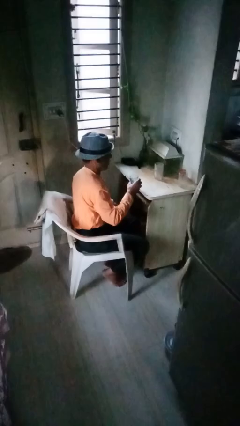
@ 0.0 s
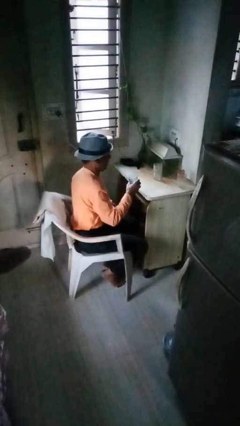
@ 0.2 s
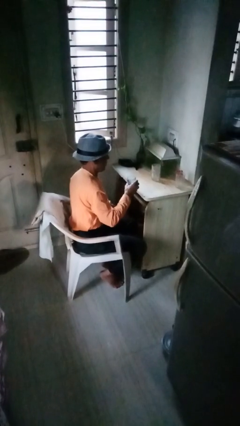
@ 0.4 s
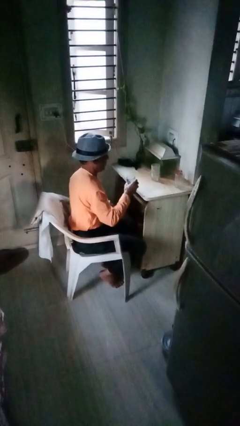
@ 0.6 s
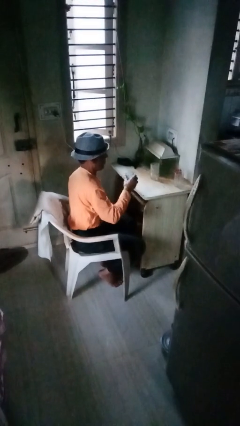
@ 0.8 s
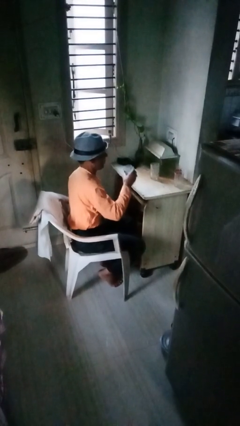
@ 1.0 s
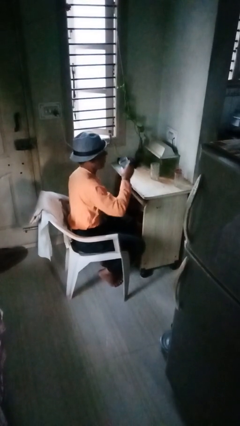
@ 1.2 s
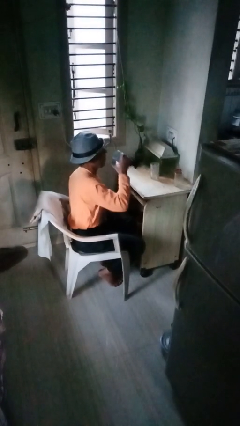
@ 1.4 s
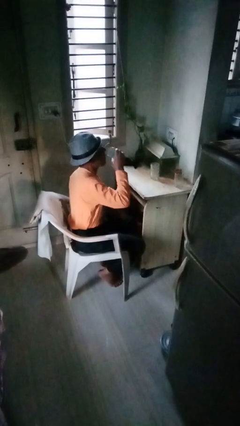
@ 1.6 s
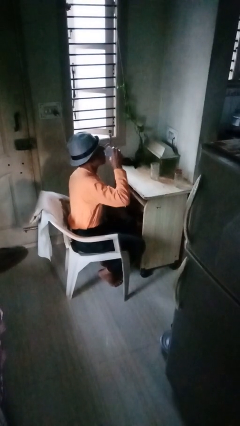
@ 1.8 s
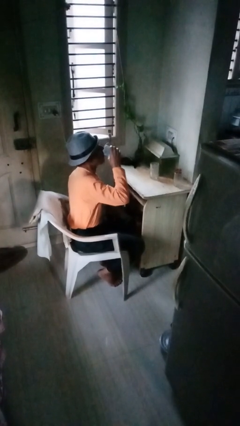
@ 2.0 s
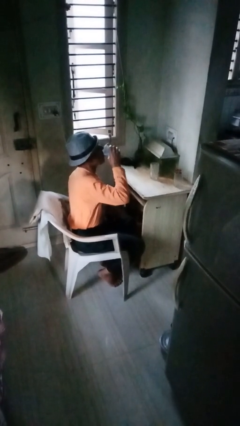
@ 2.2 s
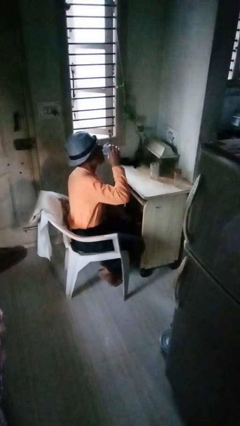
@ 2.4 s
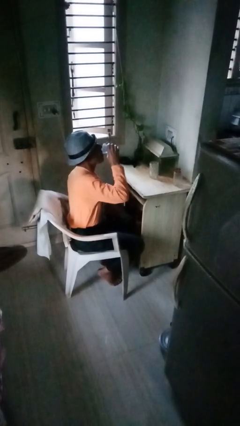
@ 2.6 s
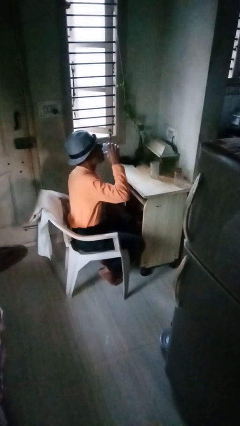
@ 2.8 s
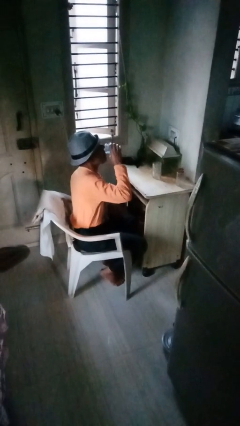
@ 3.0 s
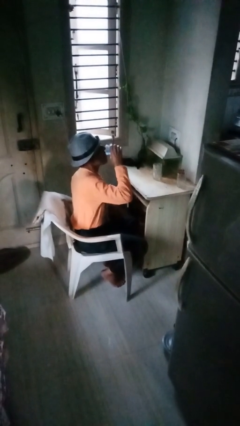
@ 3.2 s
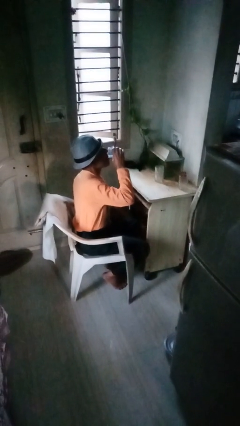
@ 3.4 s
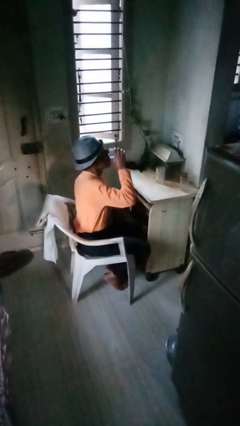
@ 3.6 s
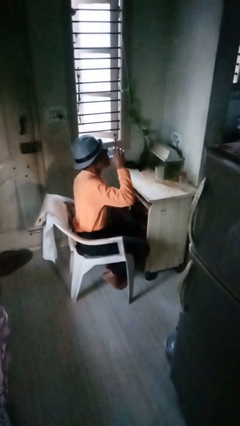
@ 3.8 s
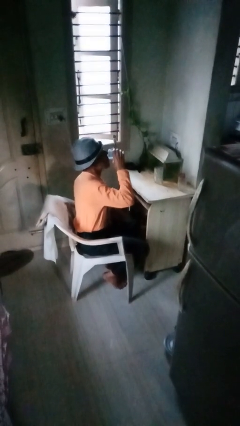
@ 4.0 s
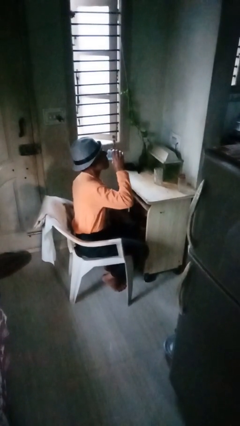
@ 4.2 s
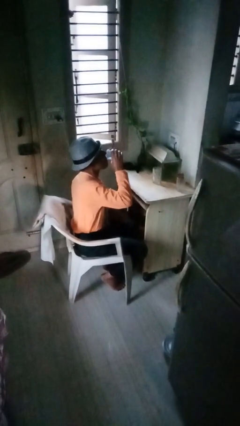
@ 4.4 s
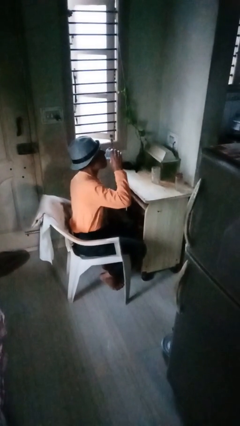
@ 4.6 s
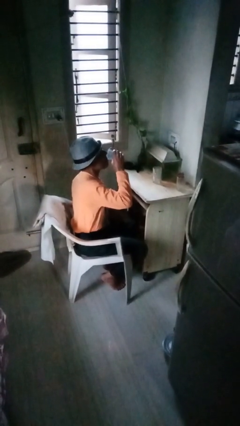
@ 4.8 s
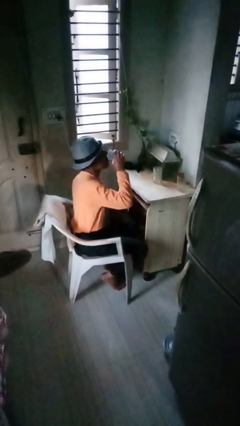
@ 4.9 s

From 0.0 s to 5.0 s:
person drinks from shotglass

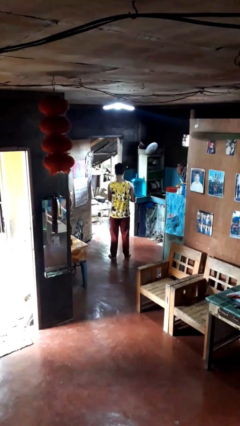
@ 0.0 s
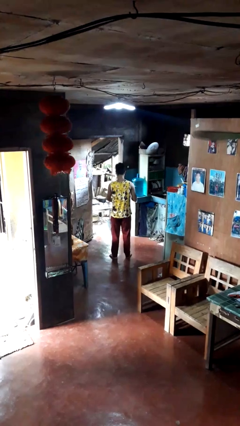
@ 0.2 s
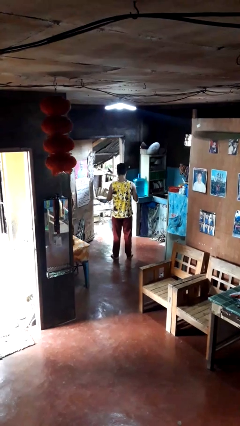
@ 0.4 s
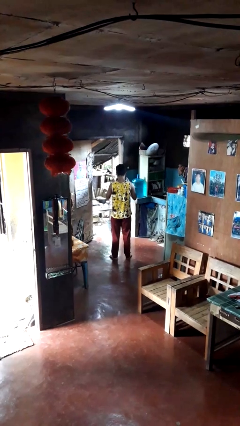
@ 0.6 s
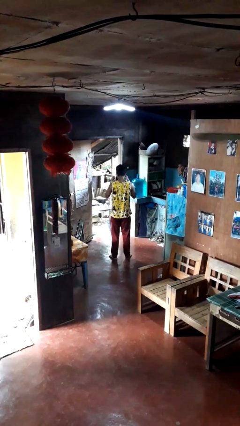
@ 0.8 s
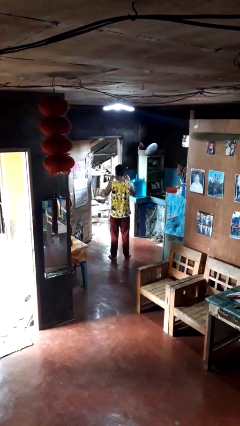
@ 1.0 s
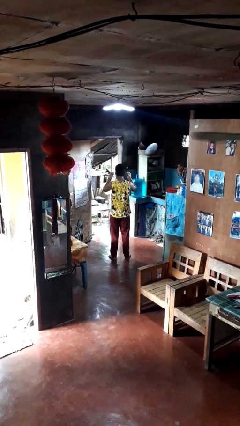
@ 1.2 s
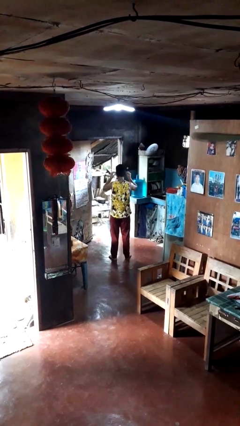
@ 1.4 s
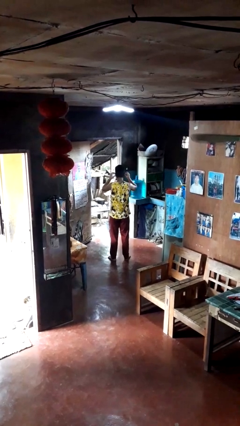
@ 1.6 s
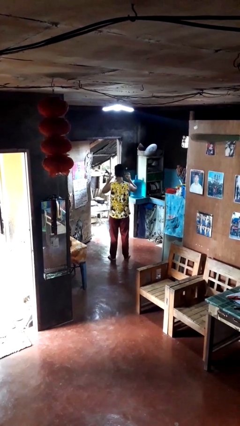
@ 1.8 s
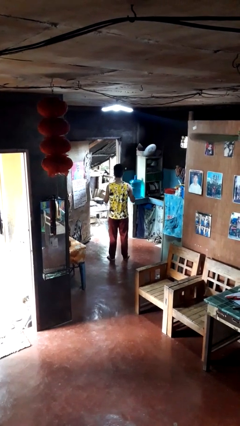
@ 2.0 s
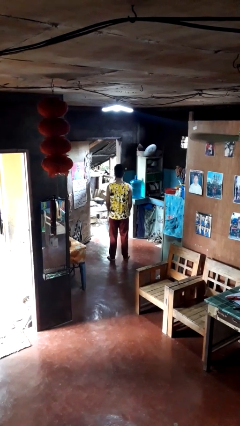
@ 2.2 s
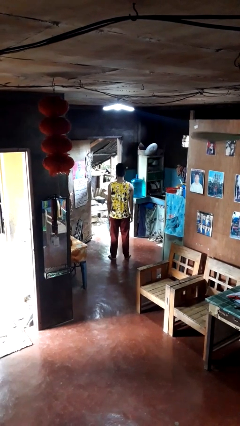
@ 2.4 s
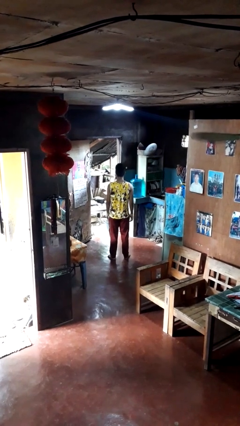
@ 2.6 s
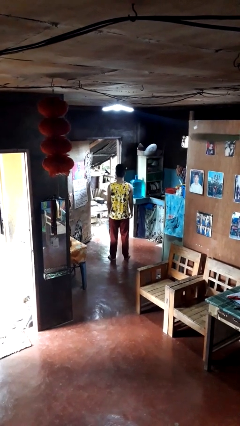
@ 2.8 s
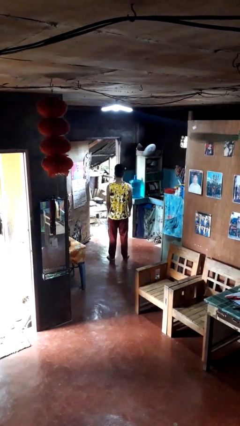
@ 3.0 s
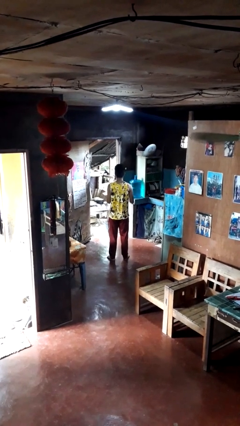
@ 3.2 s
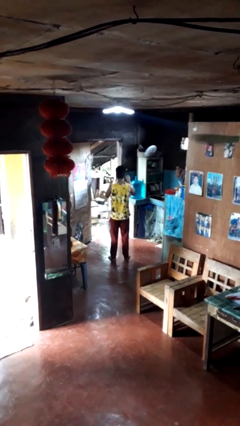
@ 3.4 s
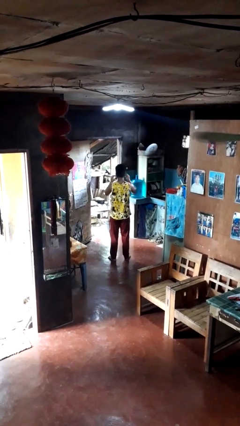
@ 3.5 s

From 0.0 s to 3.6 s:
person puts on facemask

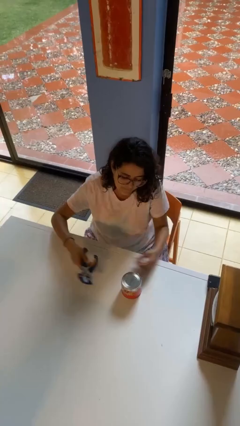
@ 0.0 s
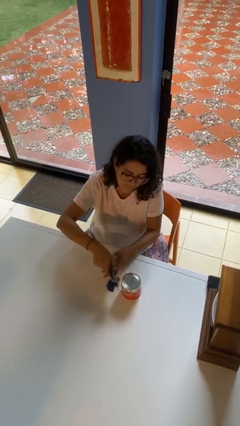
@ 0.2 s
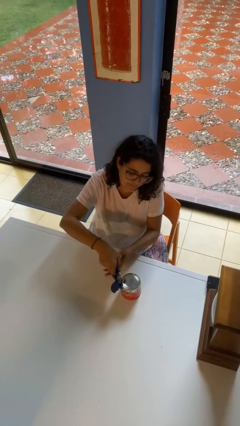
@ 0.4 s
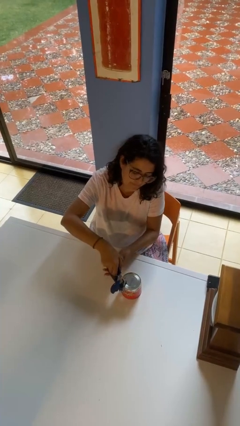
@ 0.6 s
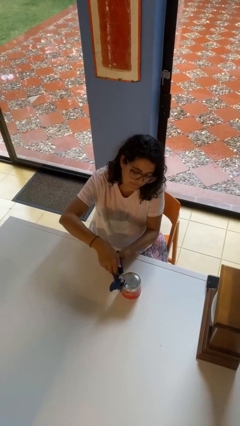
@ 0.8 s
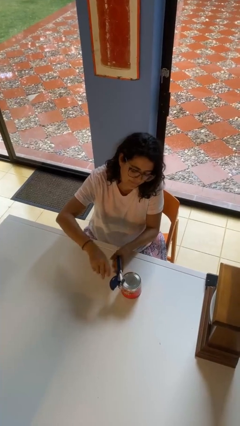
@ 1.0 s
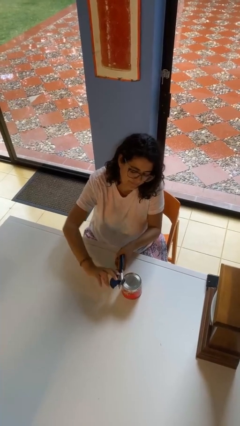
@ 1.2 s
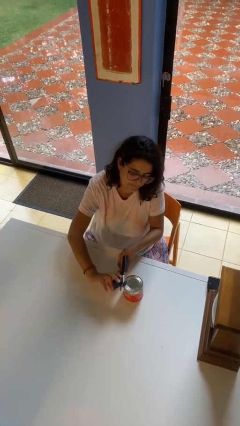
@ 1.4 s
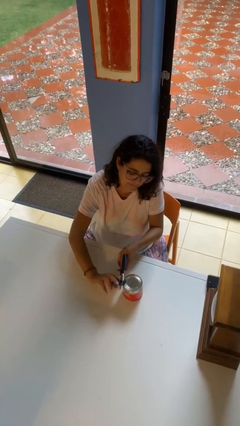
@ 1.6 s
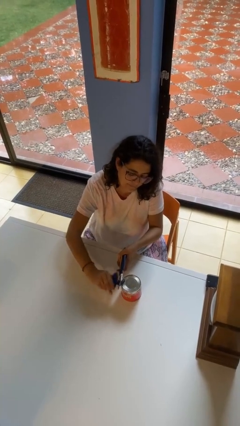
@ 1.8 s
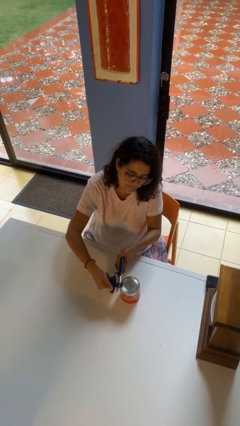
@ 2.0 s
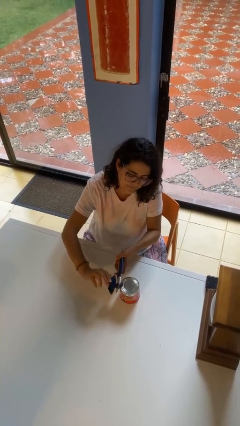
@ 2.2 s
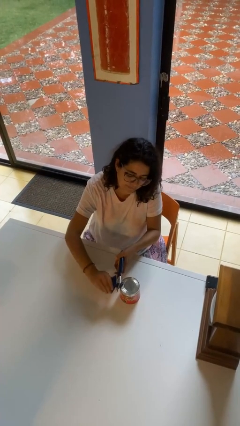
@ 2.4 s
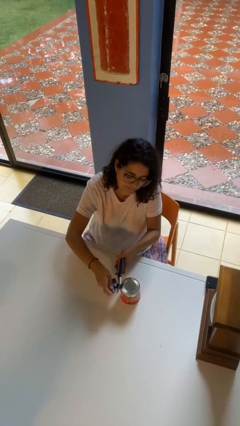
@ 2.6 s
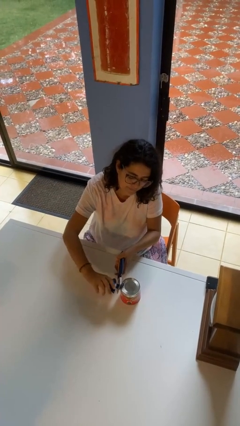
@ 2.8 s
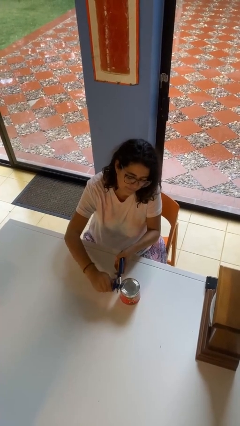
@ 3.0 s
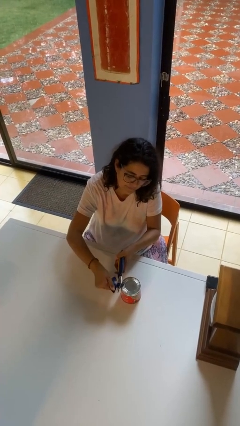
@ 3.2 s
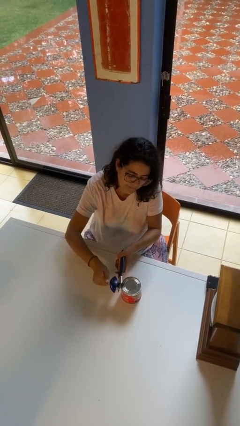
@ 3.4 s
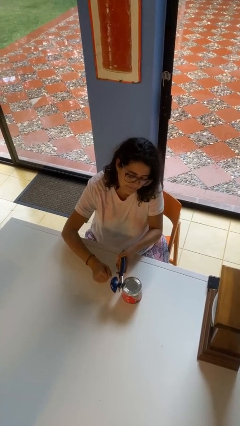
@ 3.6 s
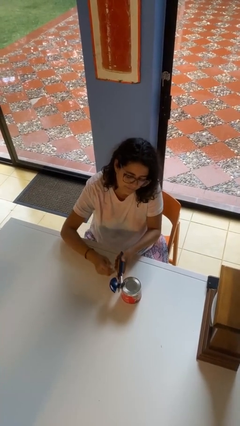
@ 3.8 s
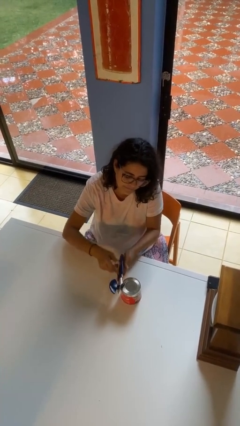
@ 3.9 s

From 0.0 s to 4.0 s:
person opens can with can opener

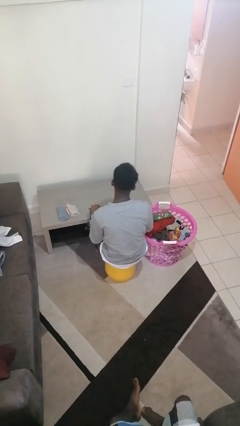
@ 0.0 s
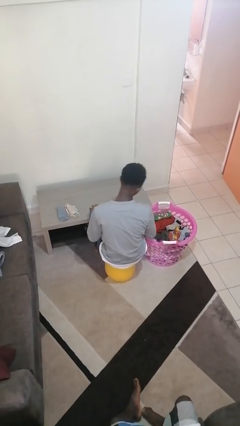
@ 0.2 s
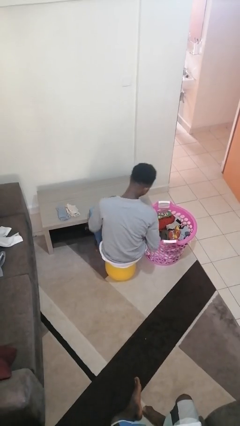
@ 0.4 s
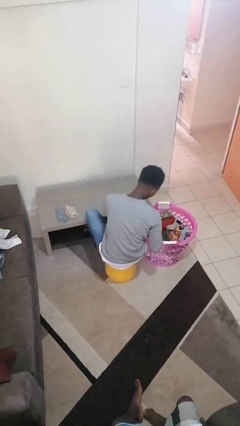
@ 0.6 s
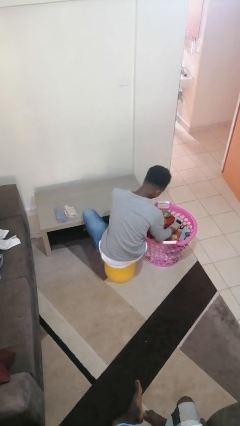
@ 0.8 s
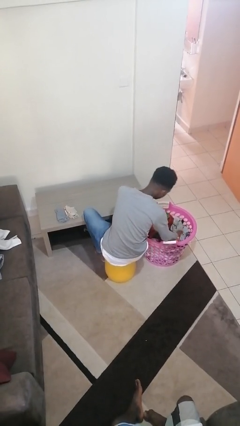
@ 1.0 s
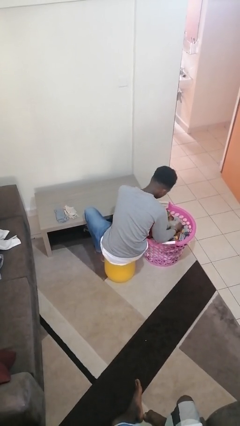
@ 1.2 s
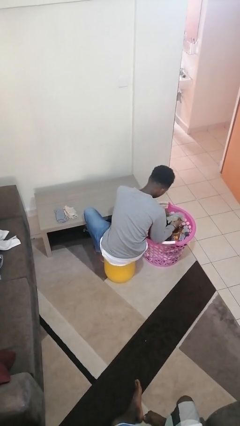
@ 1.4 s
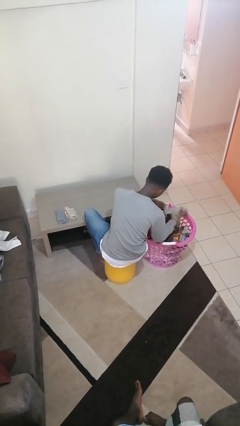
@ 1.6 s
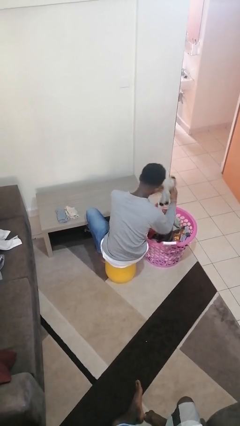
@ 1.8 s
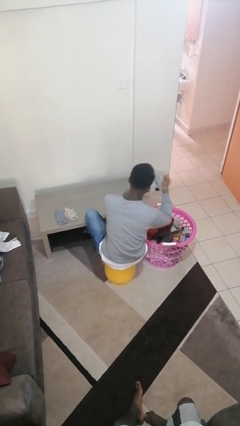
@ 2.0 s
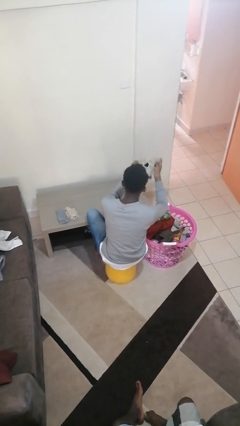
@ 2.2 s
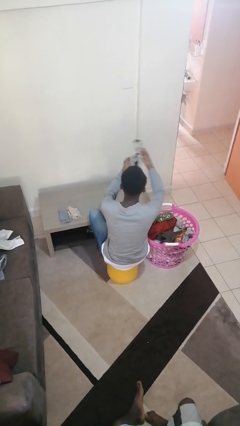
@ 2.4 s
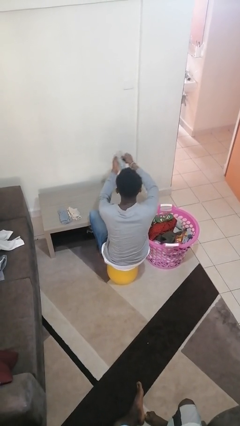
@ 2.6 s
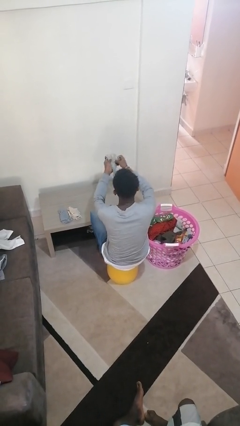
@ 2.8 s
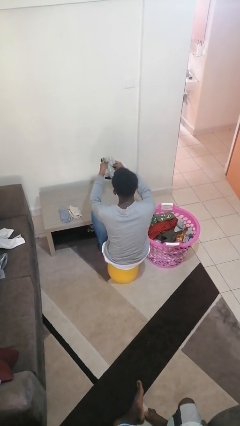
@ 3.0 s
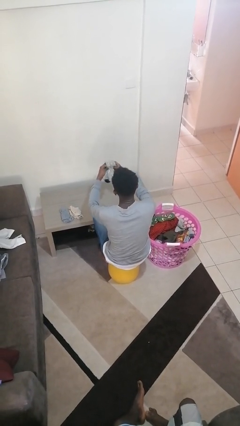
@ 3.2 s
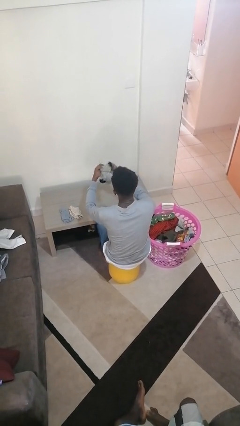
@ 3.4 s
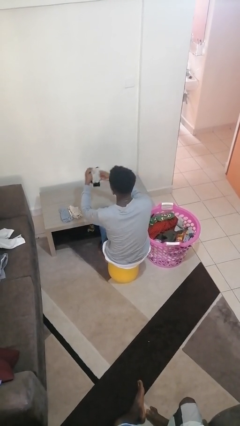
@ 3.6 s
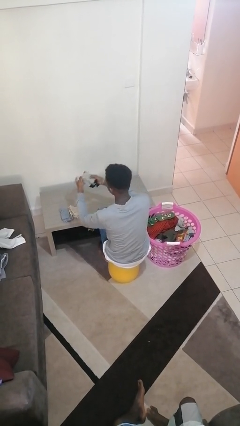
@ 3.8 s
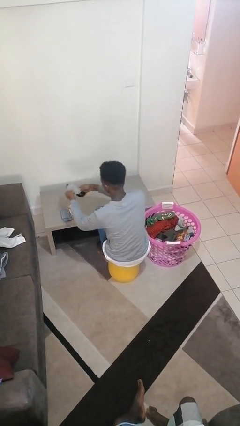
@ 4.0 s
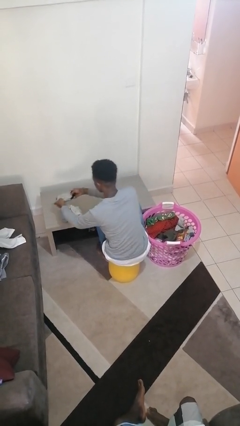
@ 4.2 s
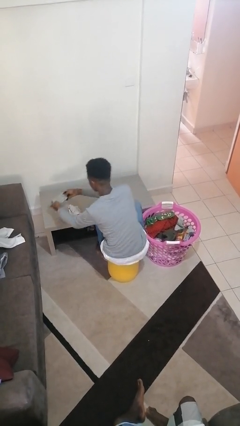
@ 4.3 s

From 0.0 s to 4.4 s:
person folds socks

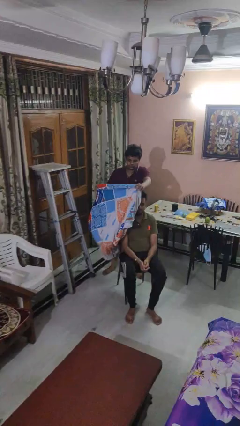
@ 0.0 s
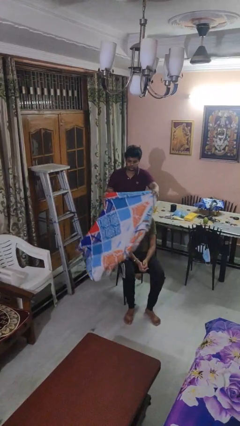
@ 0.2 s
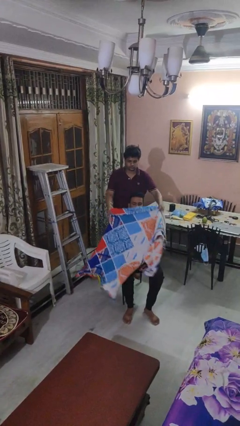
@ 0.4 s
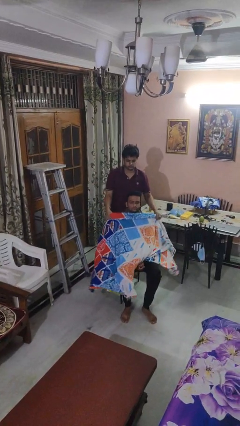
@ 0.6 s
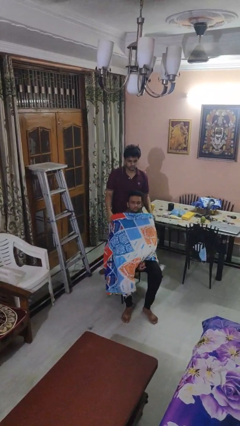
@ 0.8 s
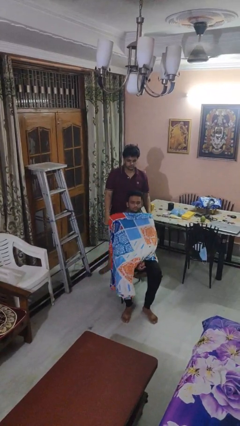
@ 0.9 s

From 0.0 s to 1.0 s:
person covers friend with blanket
